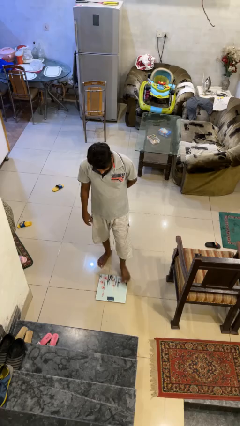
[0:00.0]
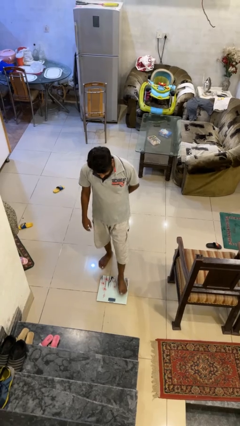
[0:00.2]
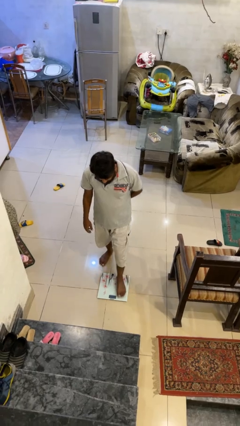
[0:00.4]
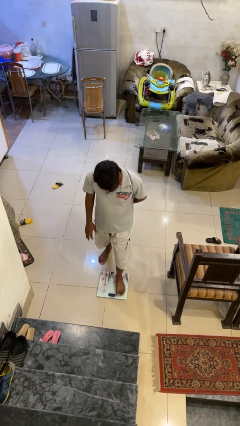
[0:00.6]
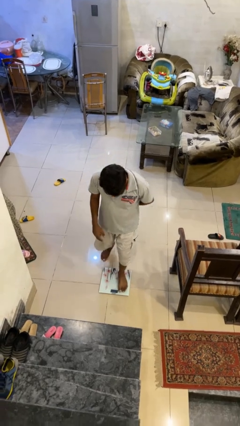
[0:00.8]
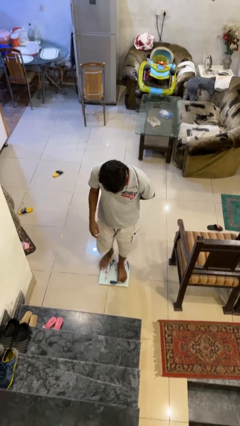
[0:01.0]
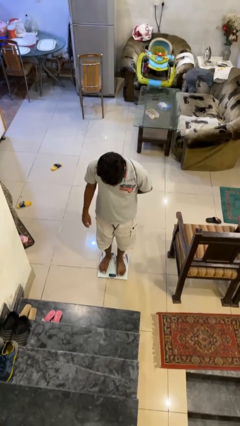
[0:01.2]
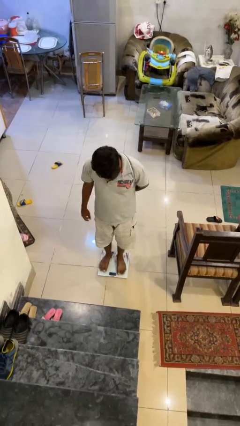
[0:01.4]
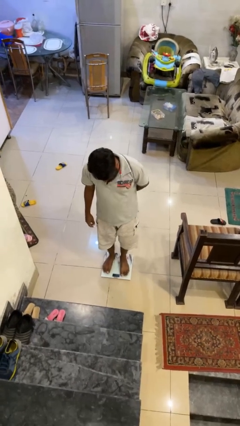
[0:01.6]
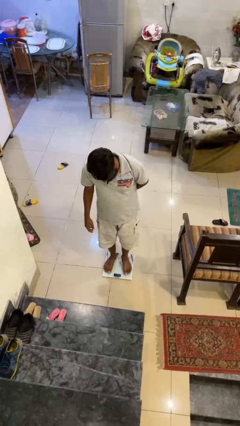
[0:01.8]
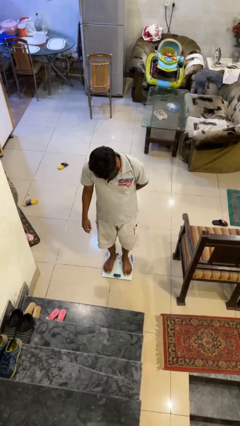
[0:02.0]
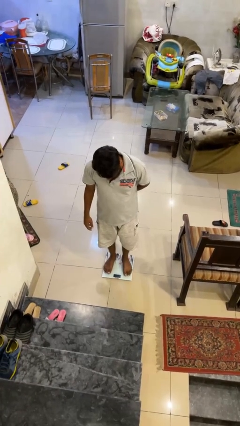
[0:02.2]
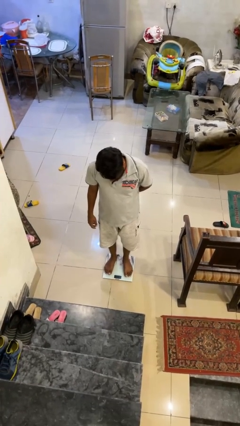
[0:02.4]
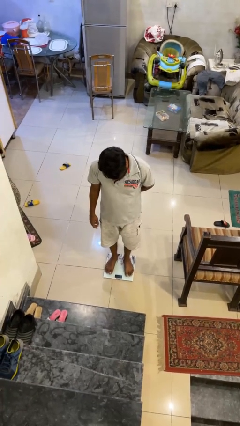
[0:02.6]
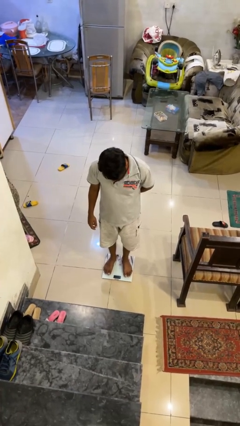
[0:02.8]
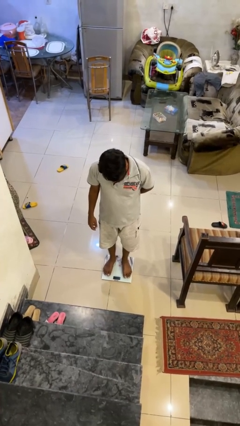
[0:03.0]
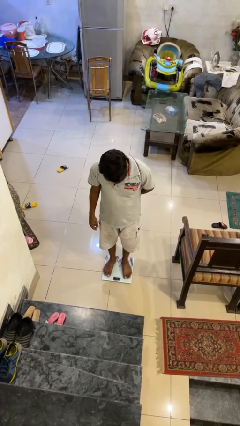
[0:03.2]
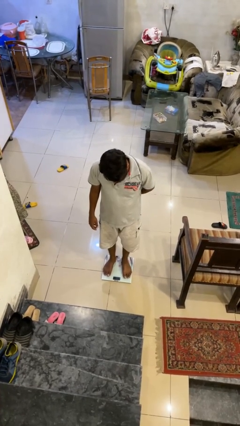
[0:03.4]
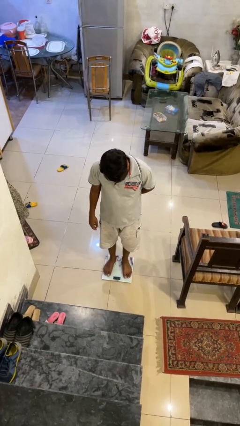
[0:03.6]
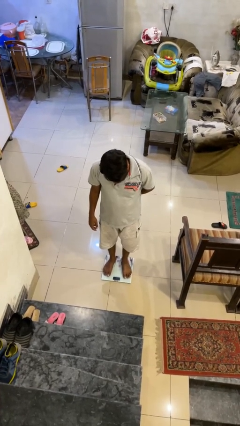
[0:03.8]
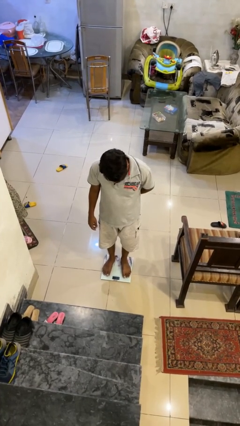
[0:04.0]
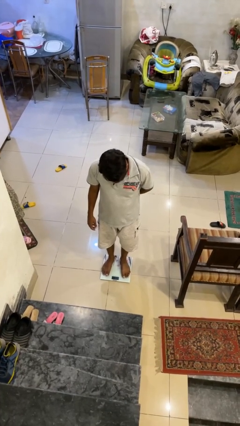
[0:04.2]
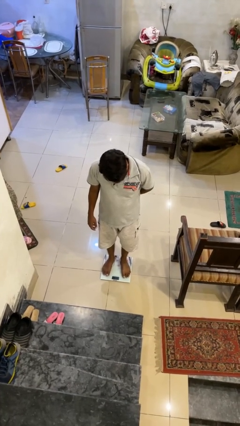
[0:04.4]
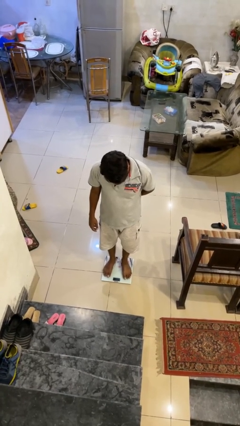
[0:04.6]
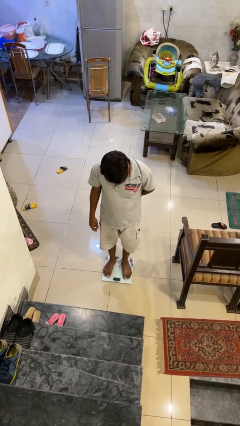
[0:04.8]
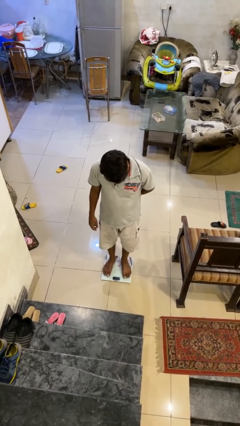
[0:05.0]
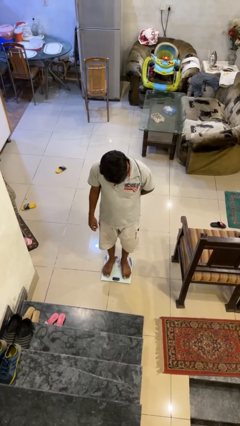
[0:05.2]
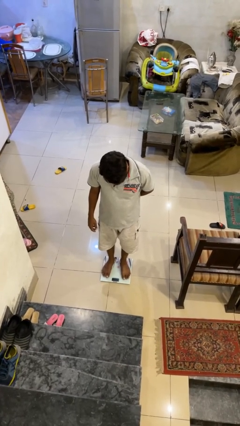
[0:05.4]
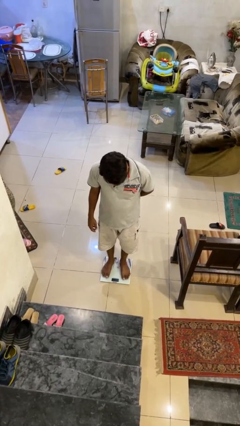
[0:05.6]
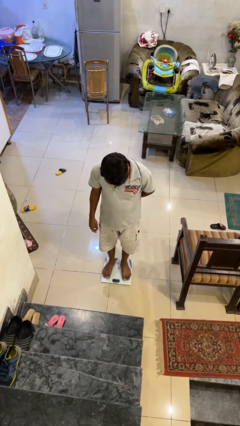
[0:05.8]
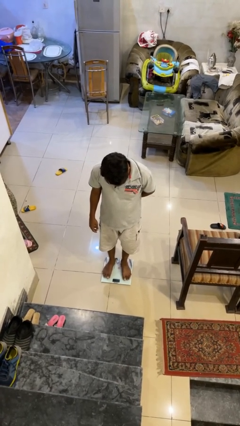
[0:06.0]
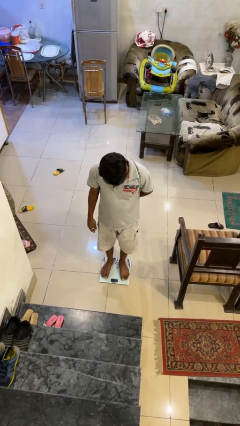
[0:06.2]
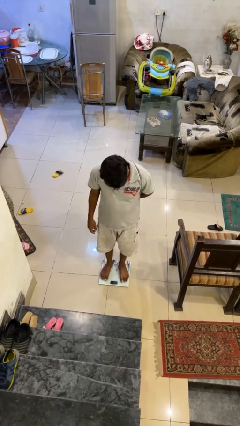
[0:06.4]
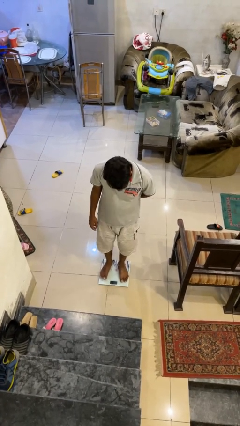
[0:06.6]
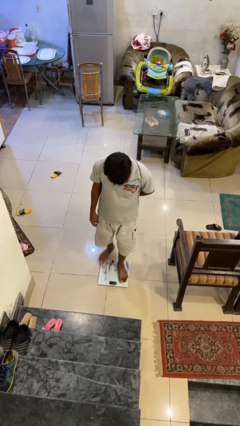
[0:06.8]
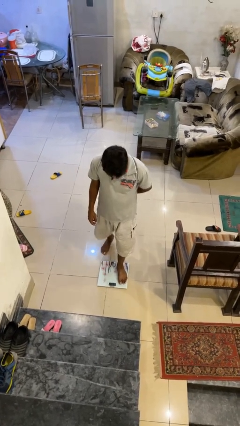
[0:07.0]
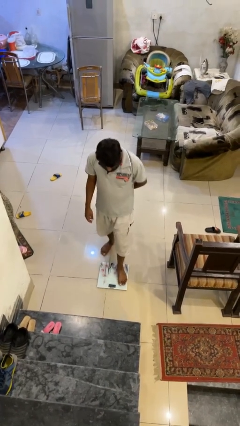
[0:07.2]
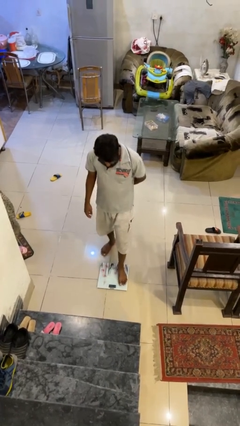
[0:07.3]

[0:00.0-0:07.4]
person uses bodyweight scale

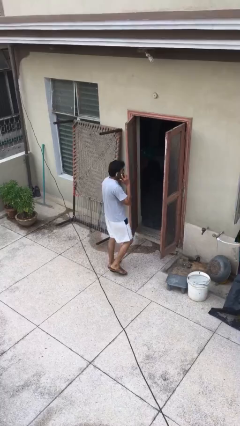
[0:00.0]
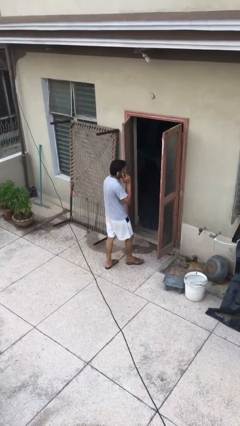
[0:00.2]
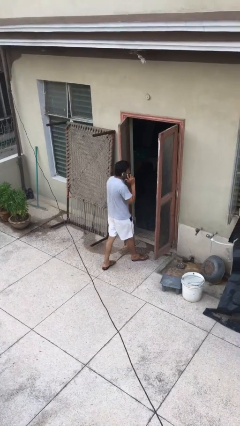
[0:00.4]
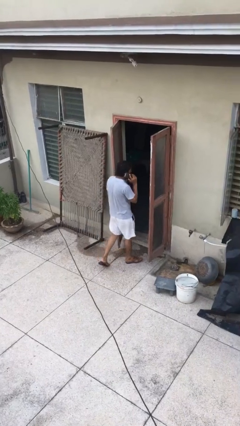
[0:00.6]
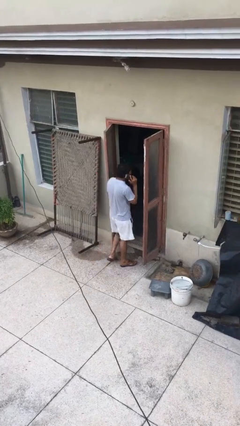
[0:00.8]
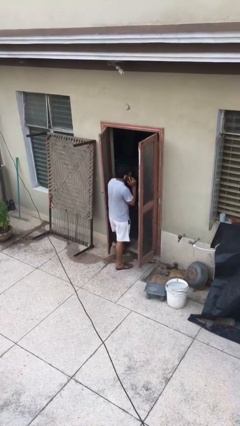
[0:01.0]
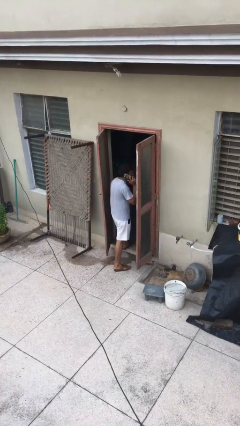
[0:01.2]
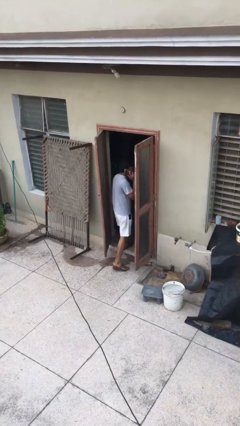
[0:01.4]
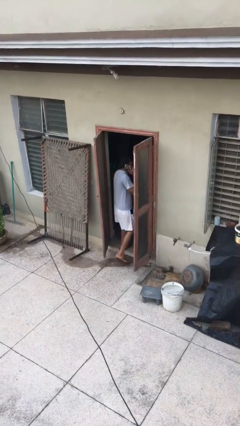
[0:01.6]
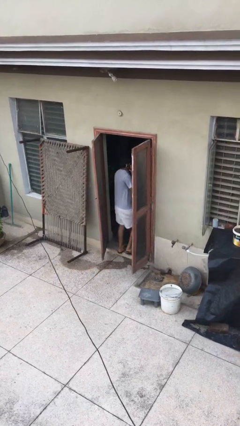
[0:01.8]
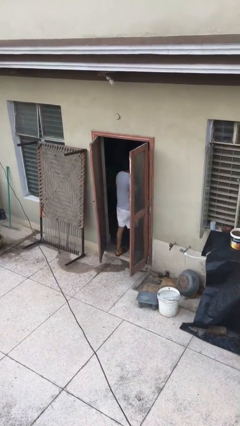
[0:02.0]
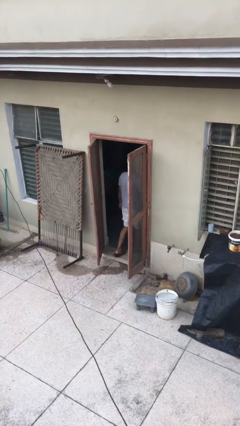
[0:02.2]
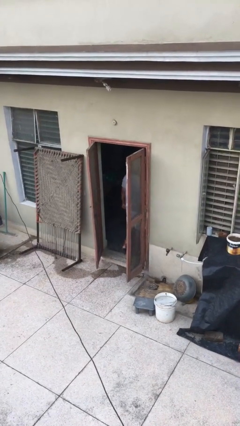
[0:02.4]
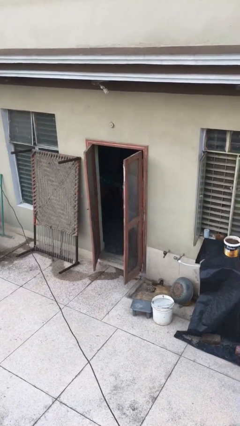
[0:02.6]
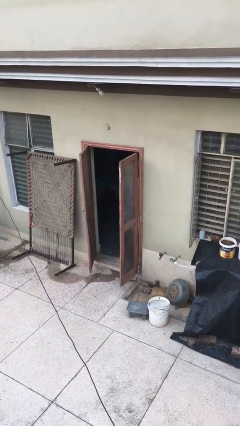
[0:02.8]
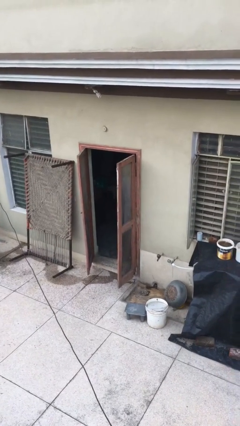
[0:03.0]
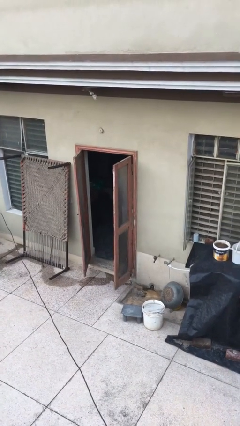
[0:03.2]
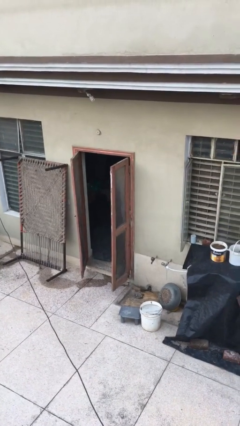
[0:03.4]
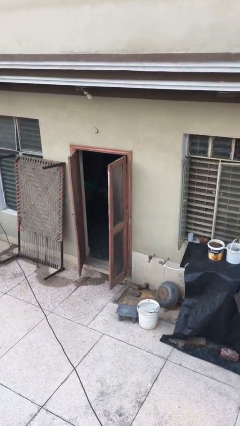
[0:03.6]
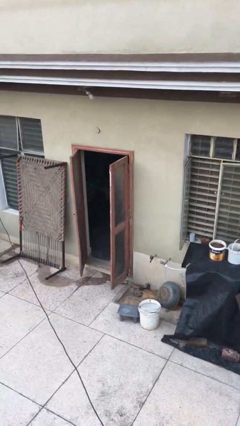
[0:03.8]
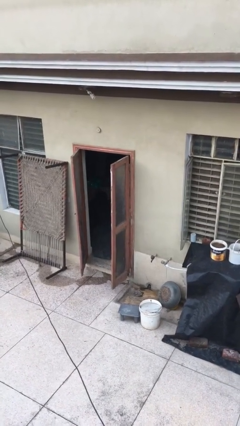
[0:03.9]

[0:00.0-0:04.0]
person exits scene through structure

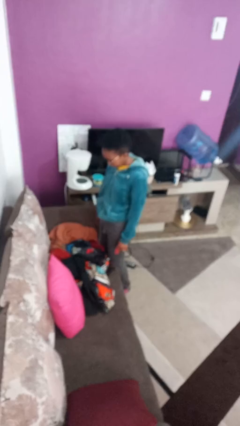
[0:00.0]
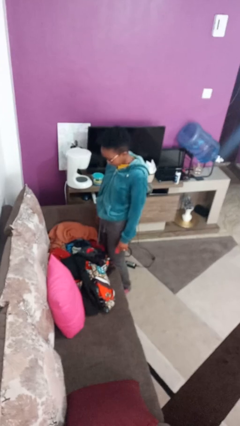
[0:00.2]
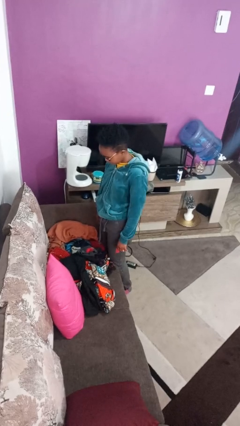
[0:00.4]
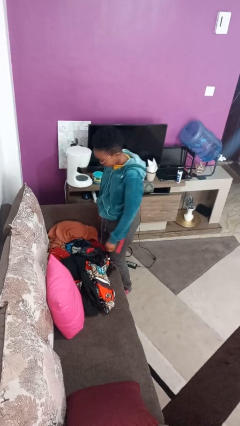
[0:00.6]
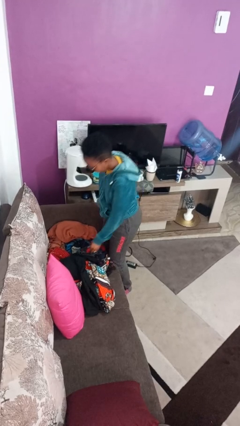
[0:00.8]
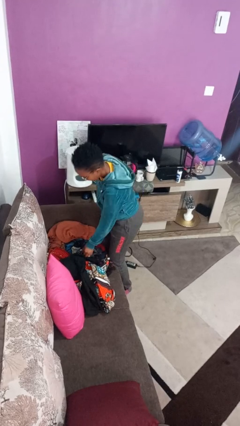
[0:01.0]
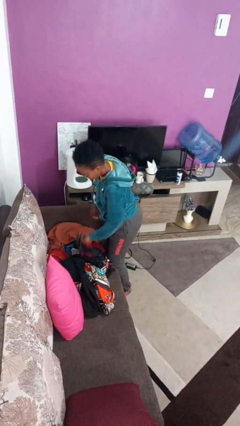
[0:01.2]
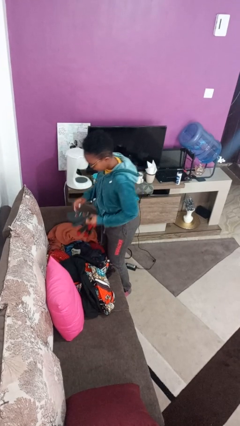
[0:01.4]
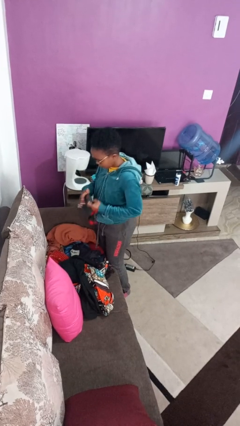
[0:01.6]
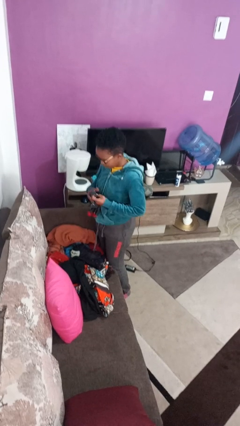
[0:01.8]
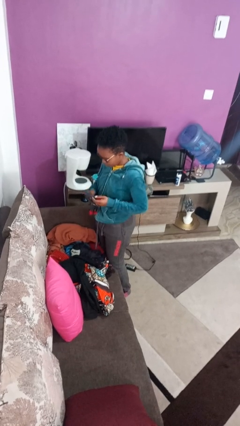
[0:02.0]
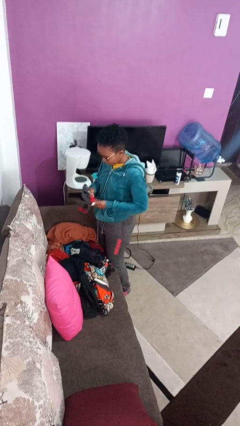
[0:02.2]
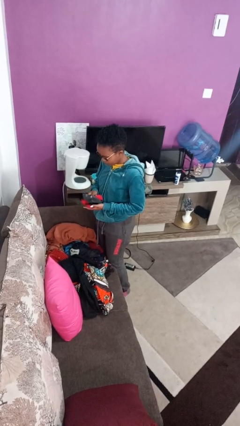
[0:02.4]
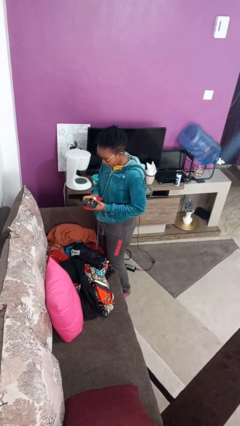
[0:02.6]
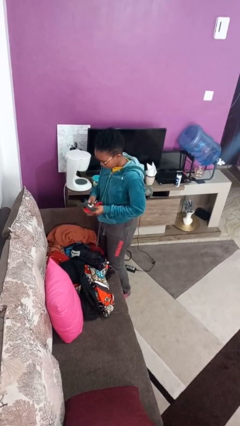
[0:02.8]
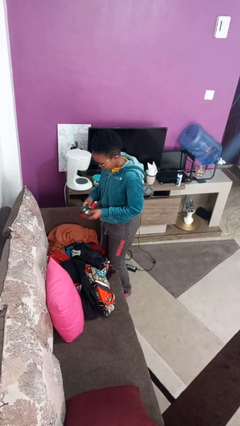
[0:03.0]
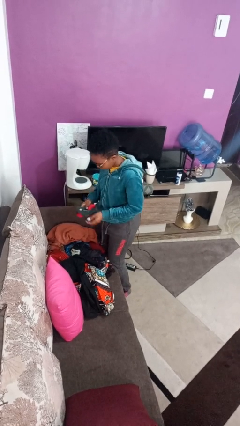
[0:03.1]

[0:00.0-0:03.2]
person folds socks

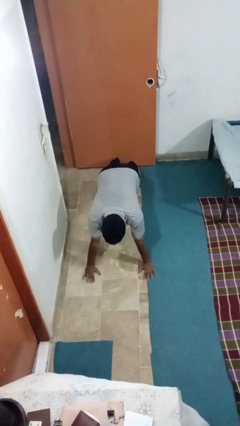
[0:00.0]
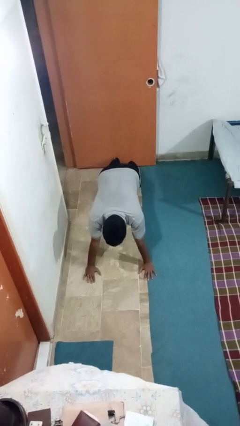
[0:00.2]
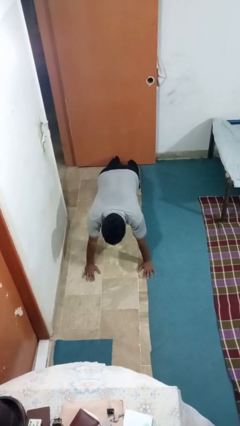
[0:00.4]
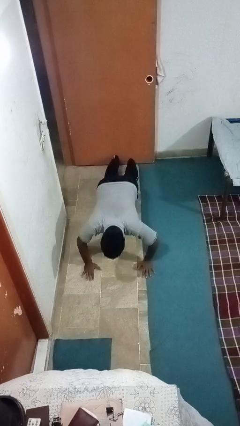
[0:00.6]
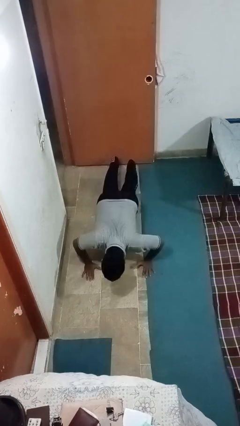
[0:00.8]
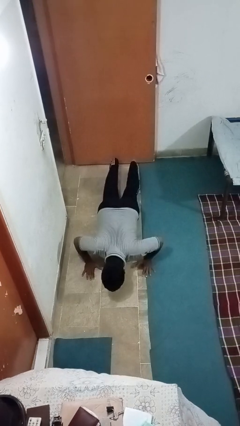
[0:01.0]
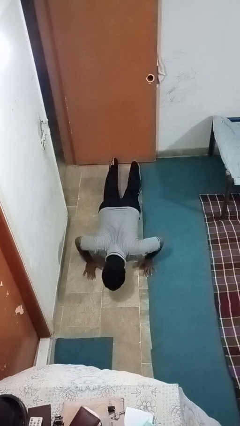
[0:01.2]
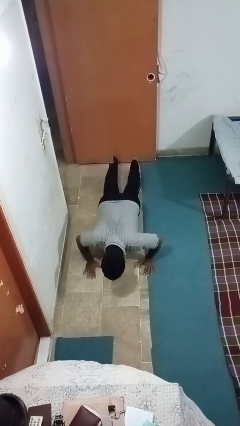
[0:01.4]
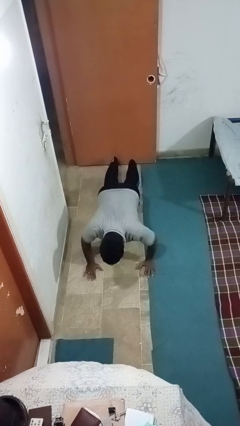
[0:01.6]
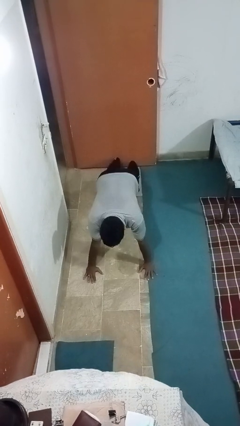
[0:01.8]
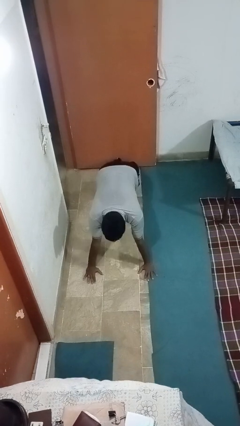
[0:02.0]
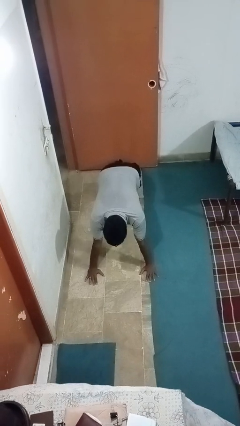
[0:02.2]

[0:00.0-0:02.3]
person exercises with pushup

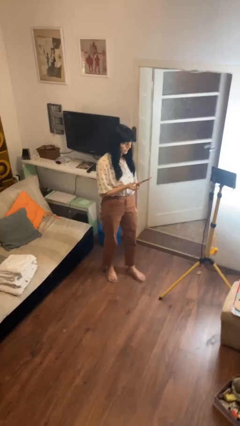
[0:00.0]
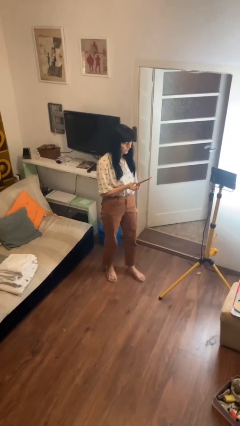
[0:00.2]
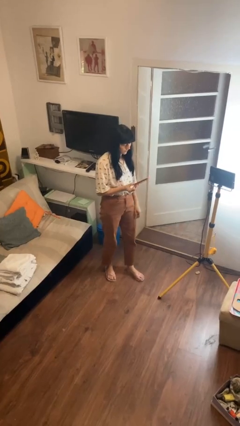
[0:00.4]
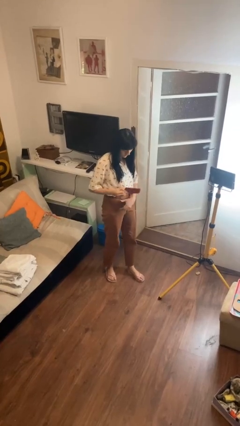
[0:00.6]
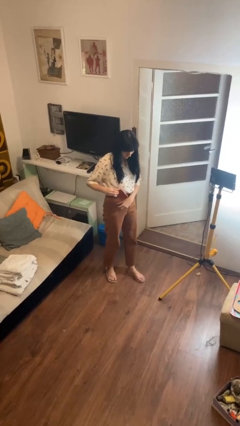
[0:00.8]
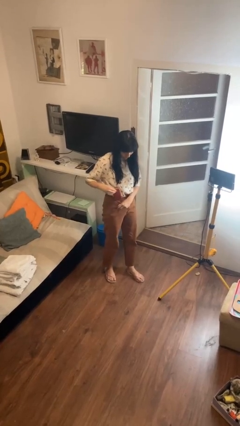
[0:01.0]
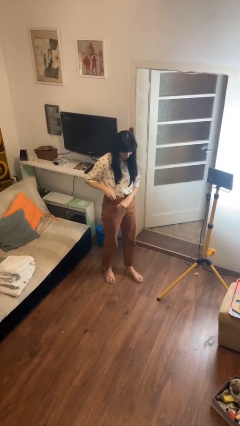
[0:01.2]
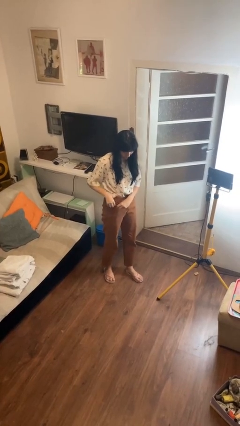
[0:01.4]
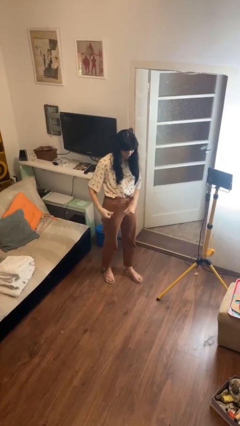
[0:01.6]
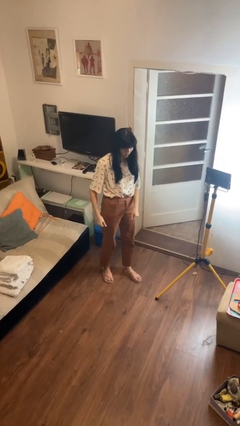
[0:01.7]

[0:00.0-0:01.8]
person puts phone into pocket
